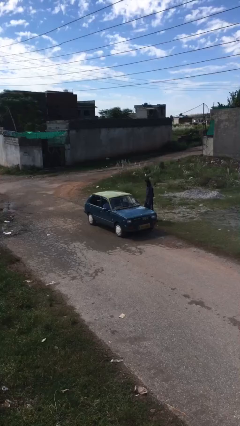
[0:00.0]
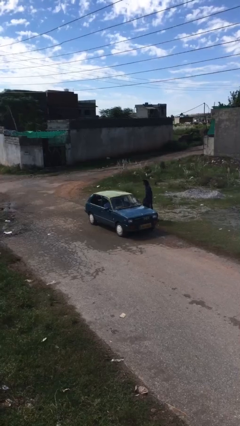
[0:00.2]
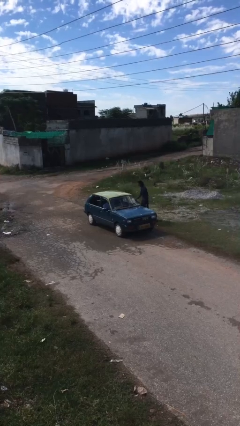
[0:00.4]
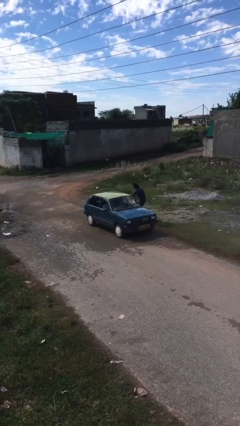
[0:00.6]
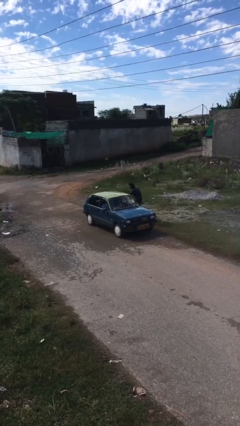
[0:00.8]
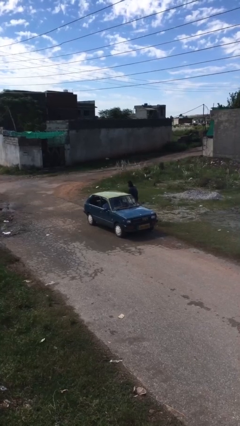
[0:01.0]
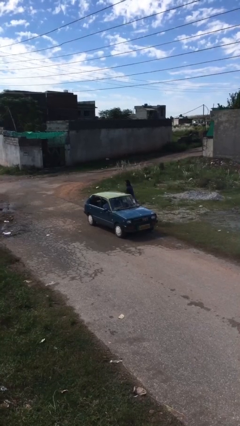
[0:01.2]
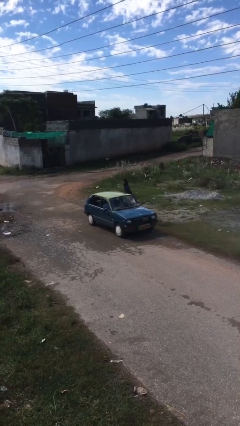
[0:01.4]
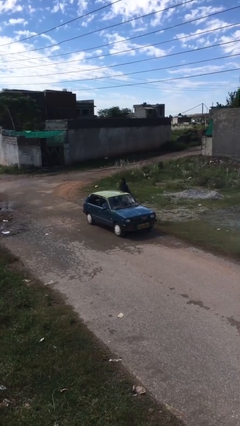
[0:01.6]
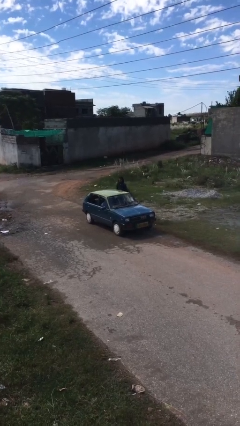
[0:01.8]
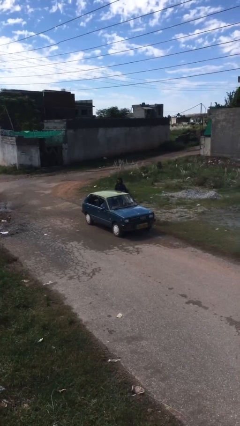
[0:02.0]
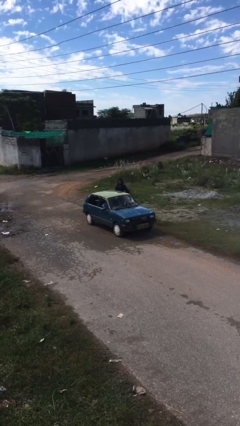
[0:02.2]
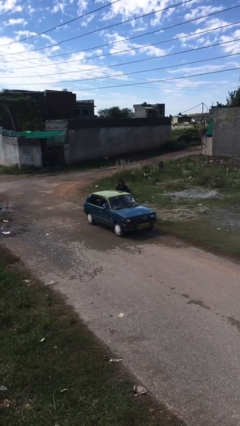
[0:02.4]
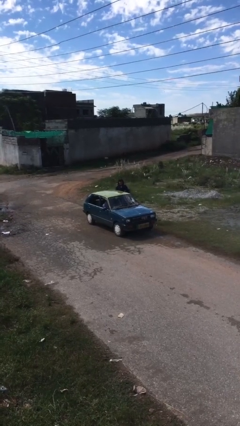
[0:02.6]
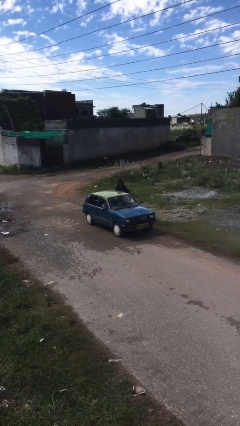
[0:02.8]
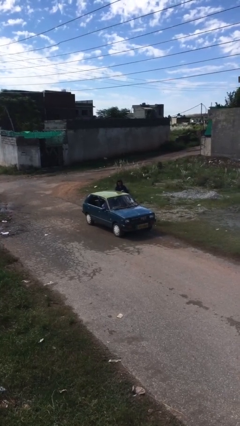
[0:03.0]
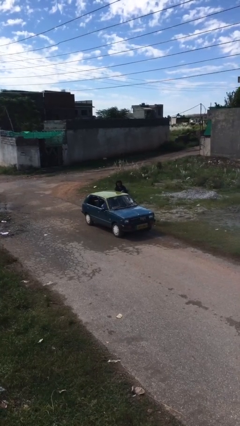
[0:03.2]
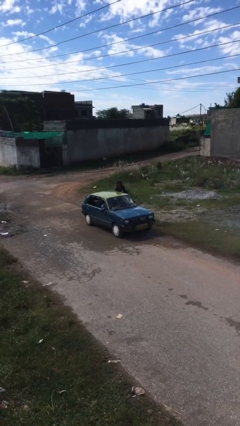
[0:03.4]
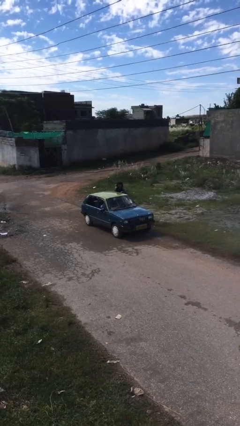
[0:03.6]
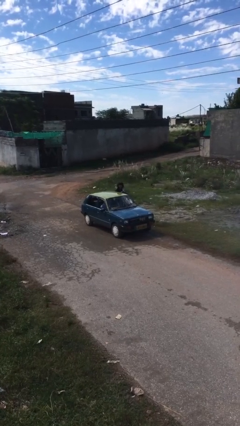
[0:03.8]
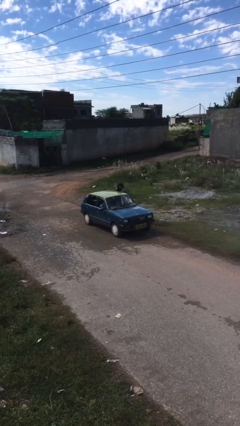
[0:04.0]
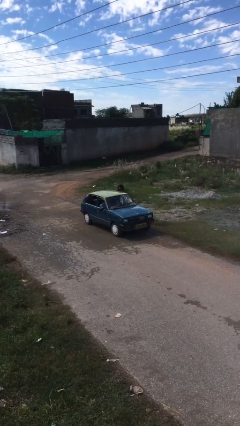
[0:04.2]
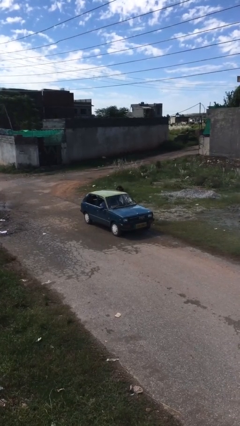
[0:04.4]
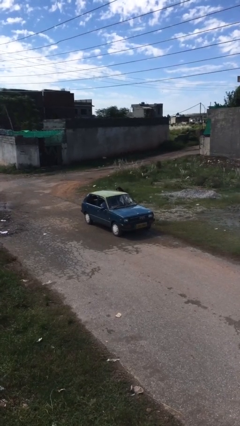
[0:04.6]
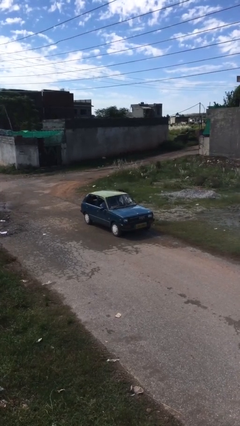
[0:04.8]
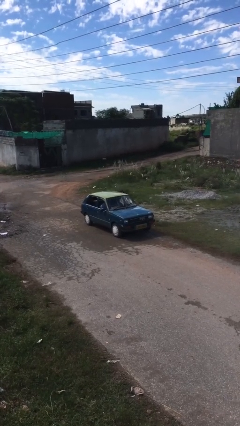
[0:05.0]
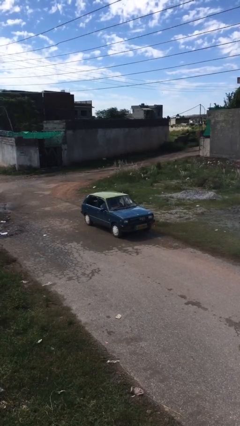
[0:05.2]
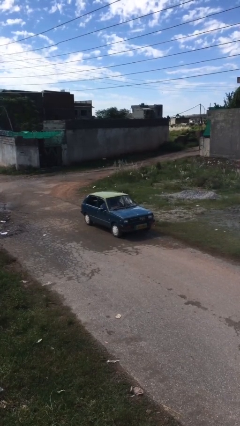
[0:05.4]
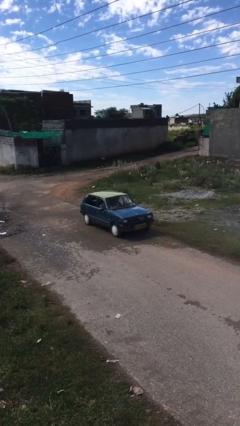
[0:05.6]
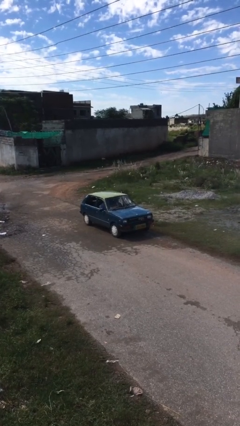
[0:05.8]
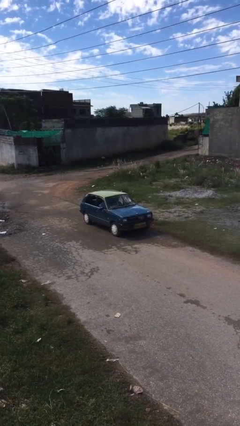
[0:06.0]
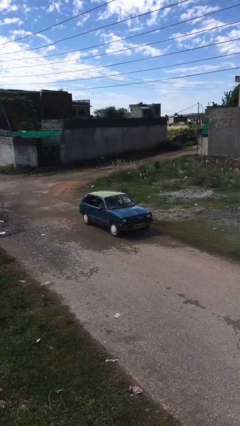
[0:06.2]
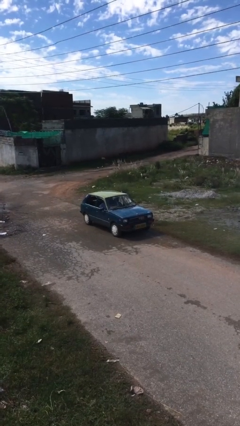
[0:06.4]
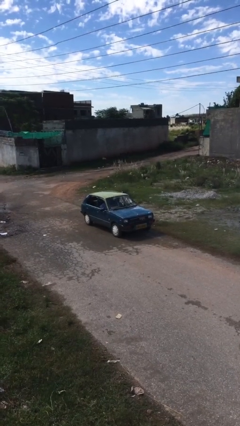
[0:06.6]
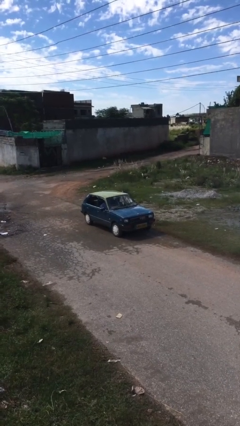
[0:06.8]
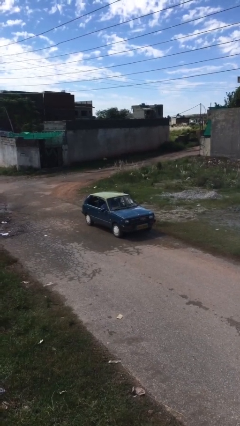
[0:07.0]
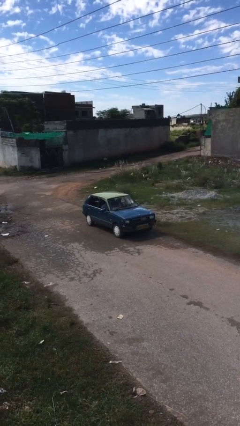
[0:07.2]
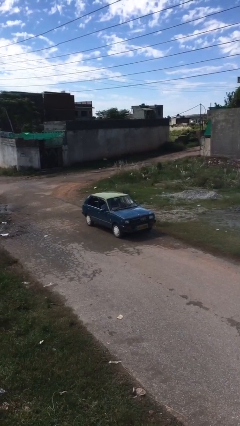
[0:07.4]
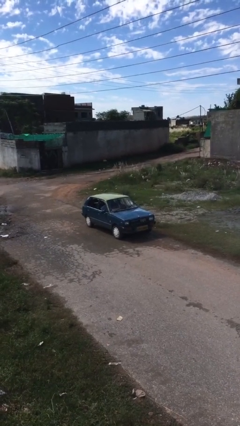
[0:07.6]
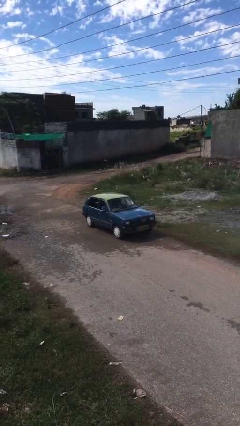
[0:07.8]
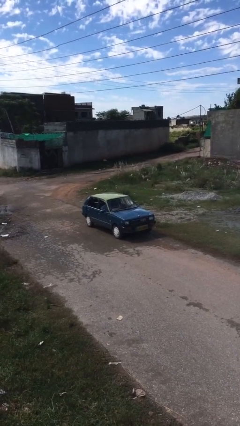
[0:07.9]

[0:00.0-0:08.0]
car picks up person

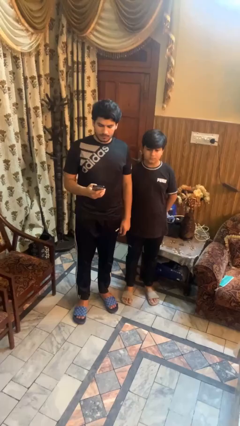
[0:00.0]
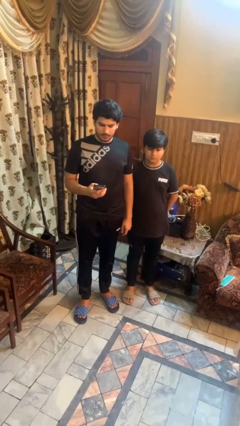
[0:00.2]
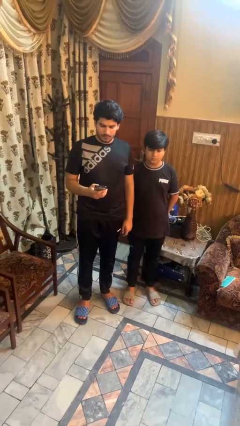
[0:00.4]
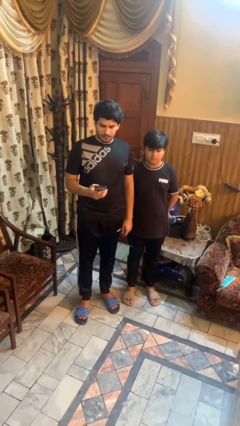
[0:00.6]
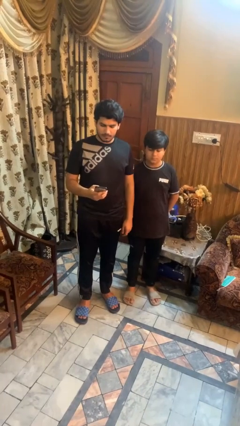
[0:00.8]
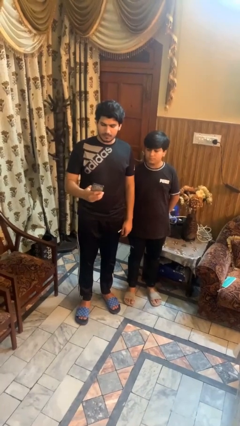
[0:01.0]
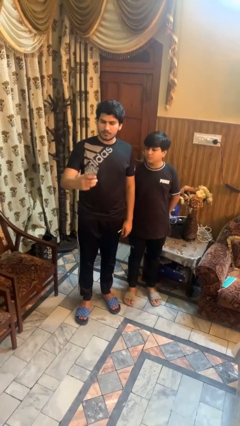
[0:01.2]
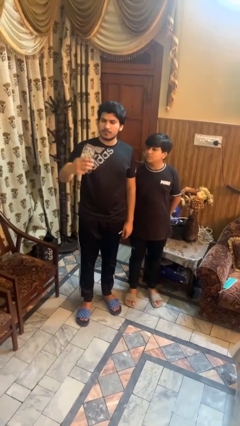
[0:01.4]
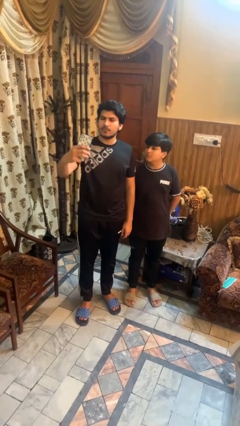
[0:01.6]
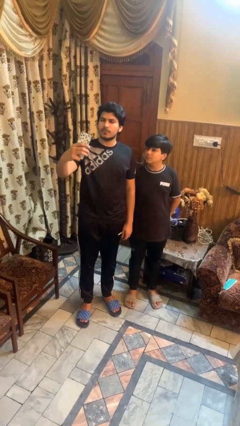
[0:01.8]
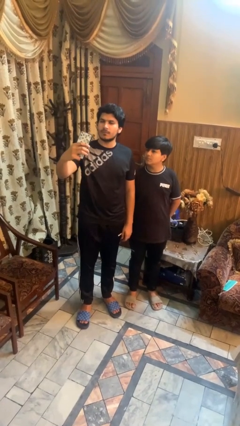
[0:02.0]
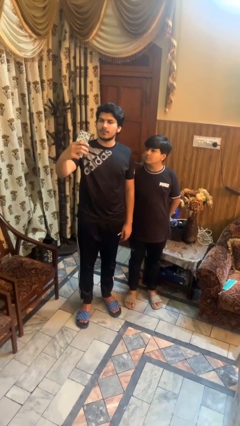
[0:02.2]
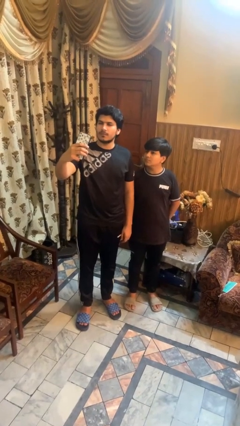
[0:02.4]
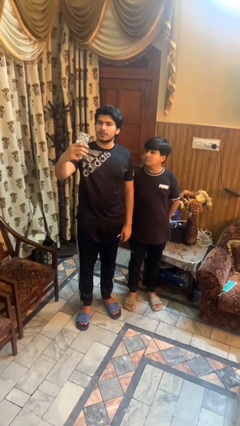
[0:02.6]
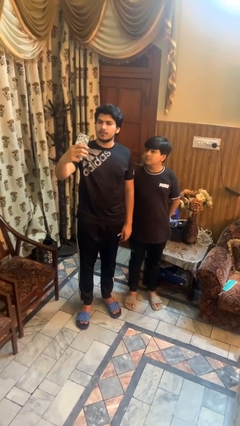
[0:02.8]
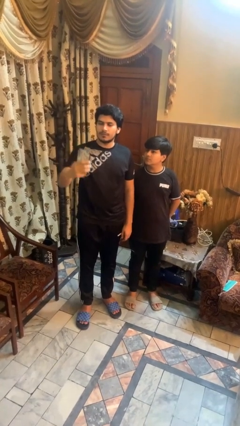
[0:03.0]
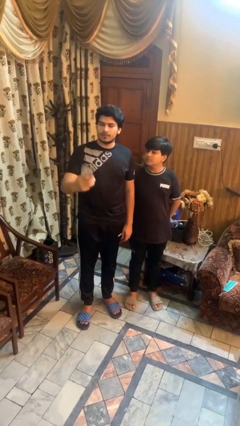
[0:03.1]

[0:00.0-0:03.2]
person takes selfie with person

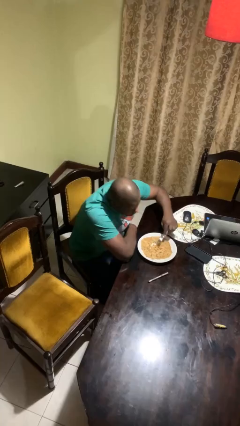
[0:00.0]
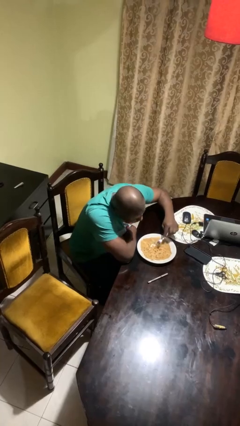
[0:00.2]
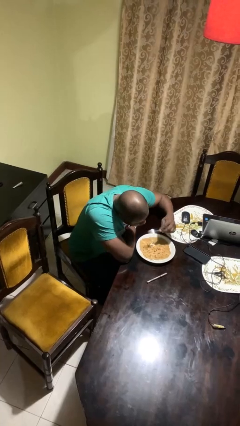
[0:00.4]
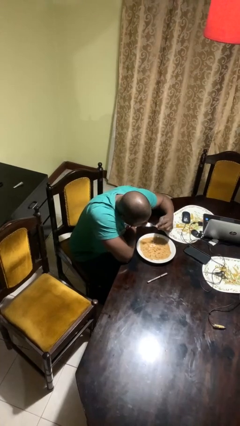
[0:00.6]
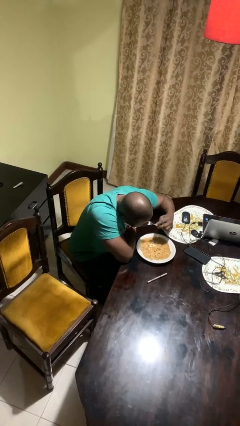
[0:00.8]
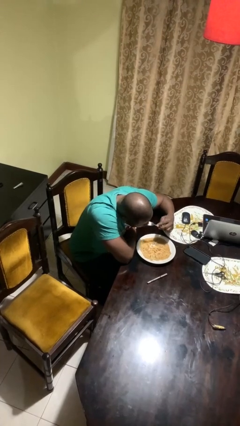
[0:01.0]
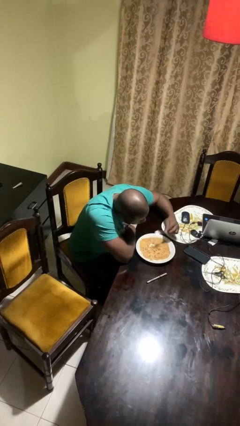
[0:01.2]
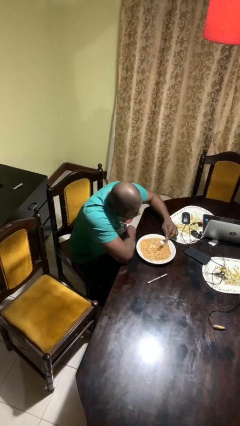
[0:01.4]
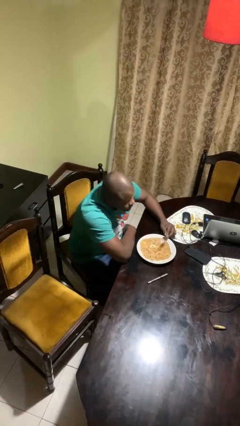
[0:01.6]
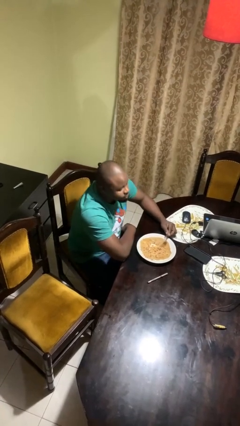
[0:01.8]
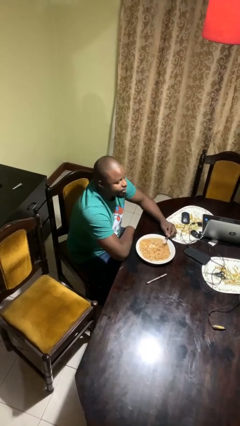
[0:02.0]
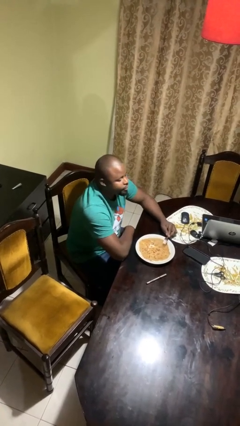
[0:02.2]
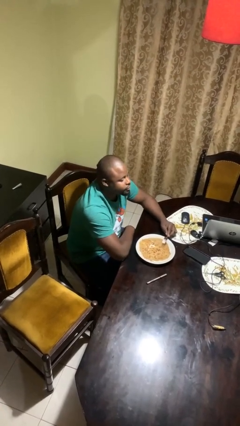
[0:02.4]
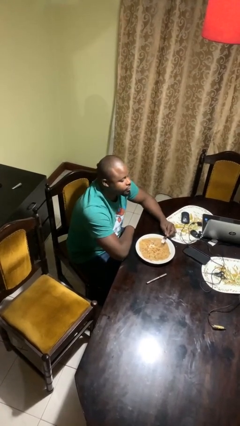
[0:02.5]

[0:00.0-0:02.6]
person eats with utensil

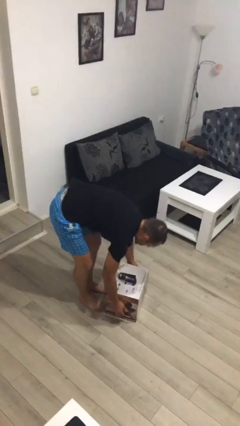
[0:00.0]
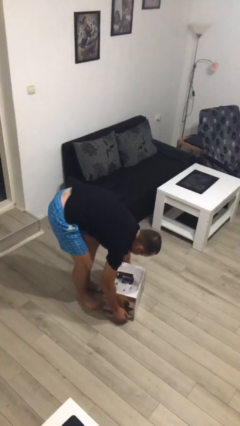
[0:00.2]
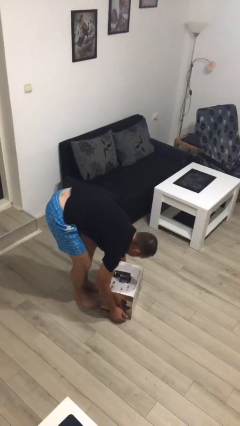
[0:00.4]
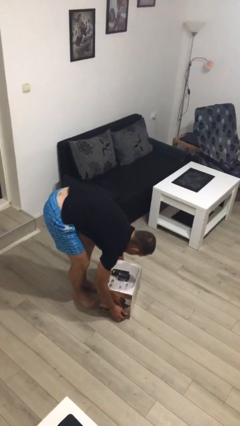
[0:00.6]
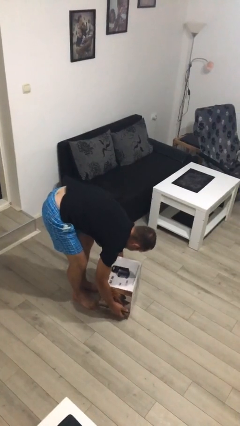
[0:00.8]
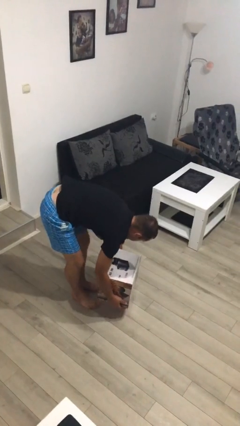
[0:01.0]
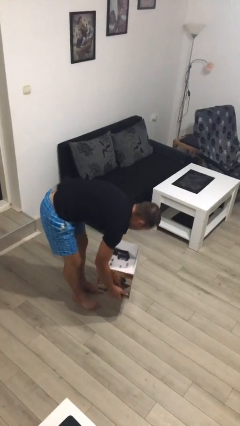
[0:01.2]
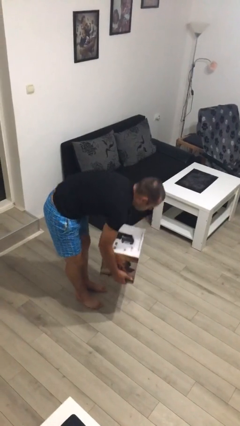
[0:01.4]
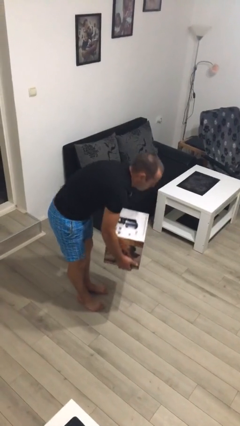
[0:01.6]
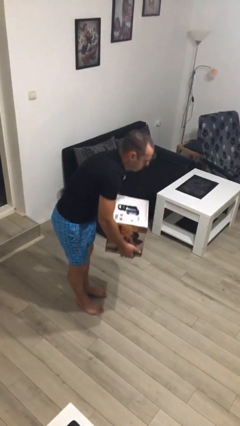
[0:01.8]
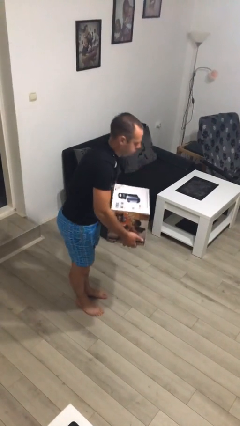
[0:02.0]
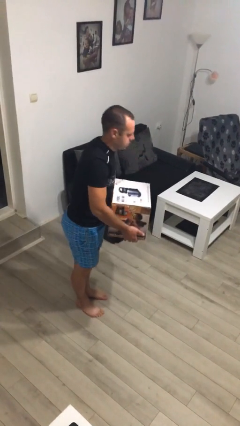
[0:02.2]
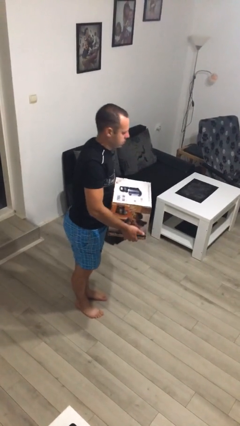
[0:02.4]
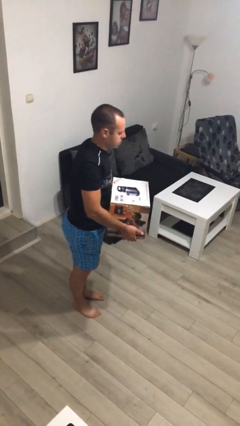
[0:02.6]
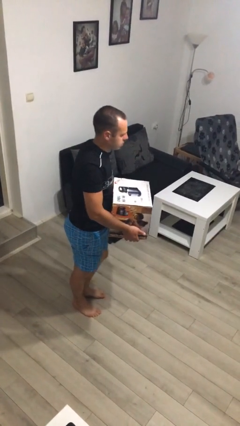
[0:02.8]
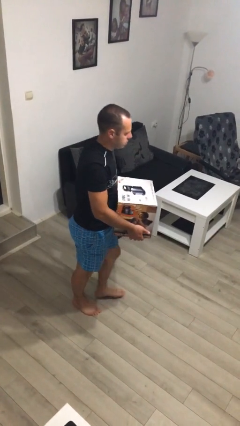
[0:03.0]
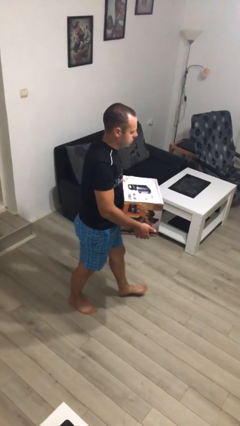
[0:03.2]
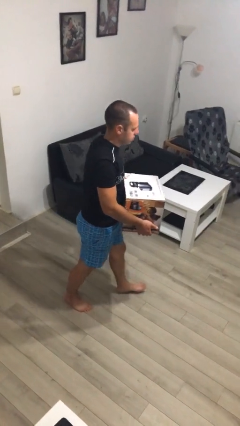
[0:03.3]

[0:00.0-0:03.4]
person picks up object from floor

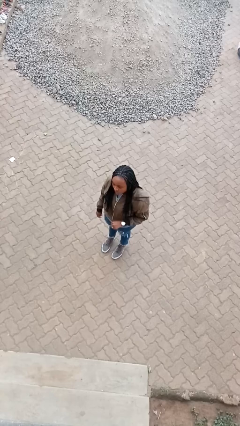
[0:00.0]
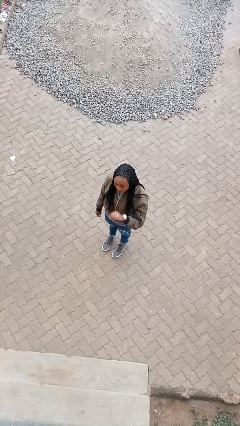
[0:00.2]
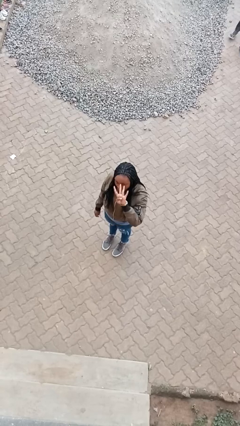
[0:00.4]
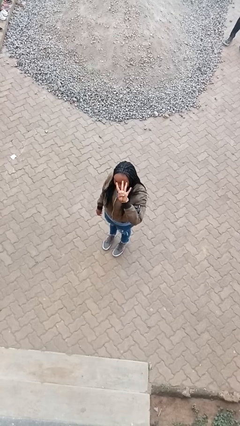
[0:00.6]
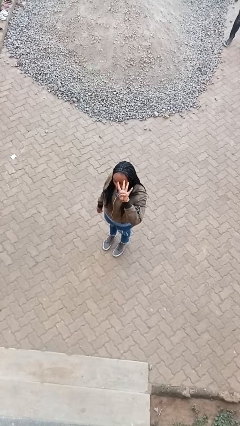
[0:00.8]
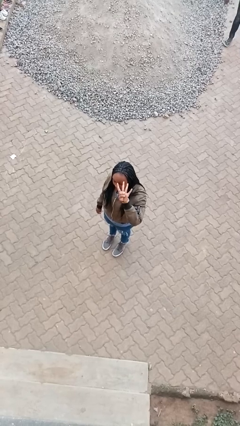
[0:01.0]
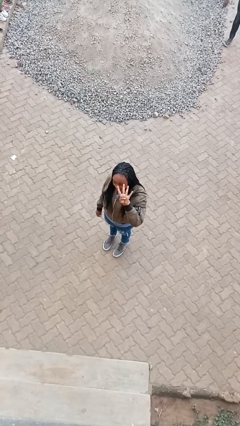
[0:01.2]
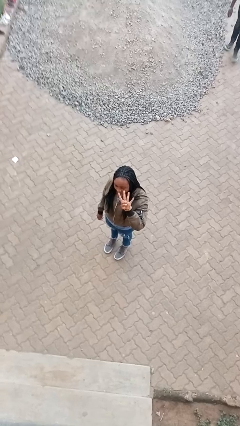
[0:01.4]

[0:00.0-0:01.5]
person gestures number four
